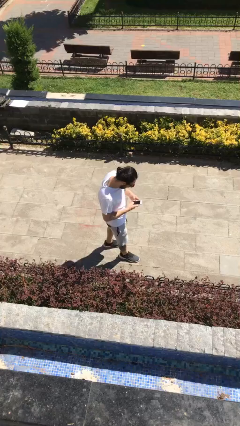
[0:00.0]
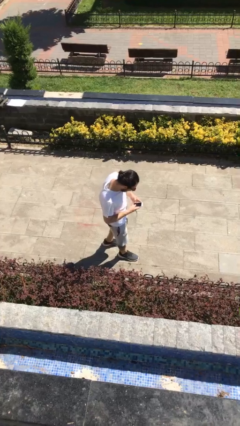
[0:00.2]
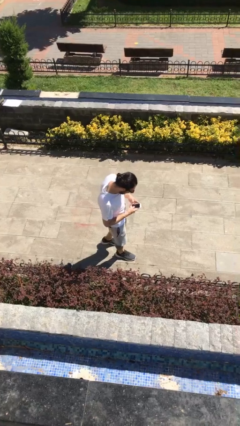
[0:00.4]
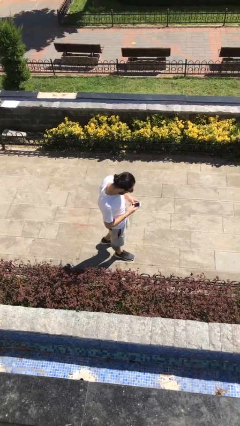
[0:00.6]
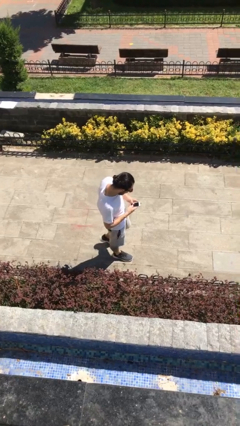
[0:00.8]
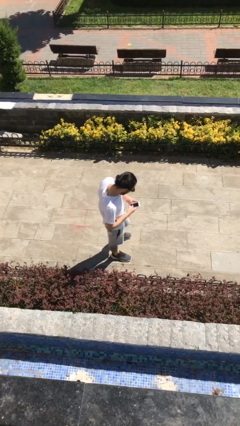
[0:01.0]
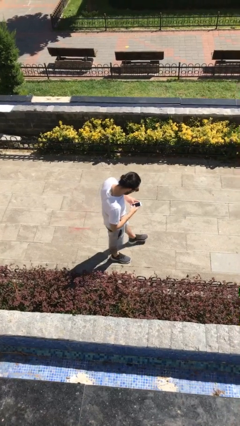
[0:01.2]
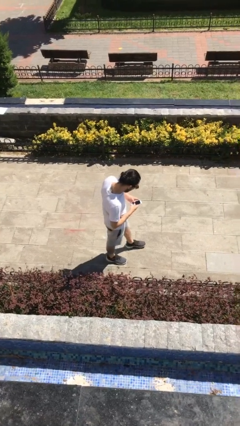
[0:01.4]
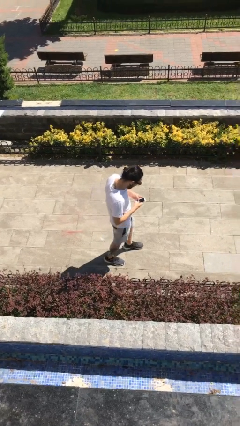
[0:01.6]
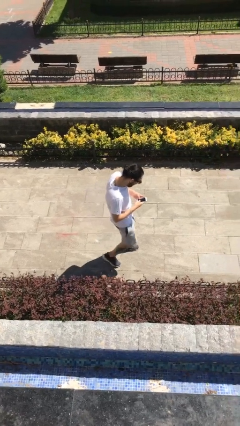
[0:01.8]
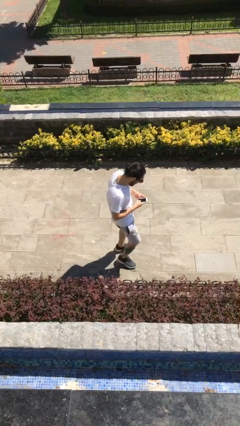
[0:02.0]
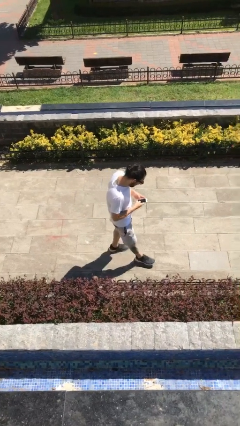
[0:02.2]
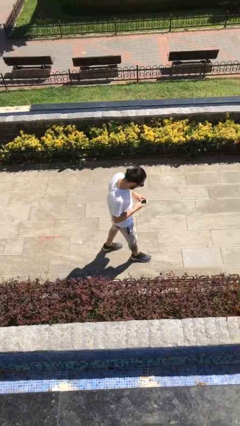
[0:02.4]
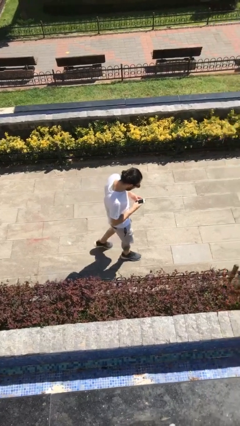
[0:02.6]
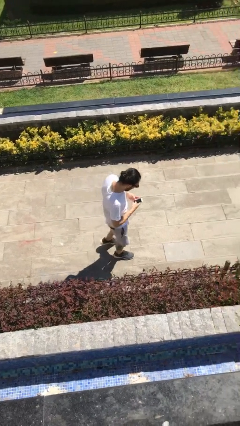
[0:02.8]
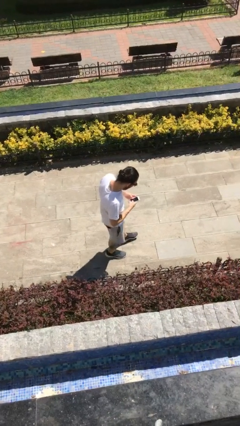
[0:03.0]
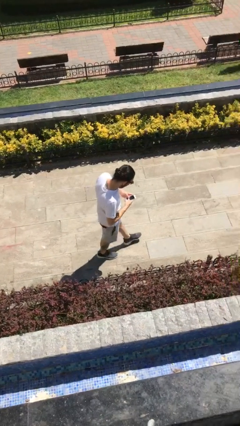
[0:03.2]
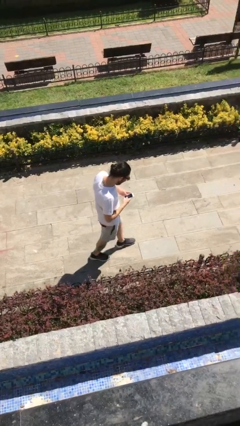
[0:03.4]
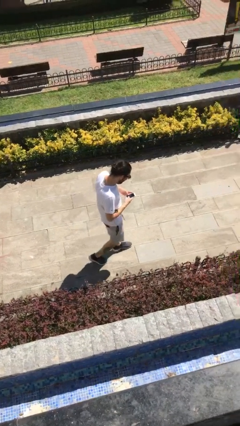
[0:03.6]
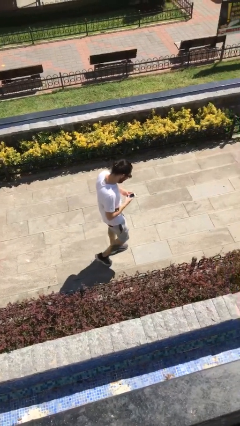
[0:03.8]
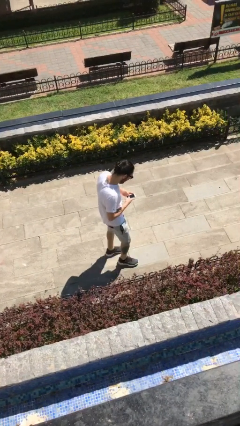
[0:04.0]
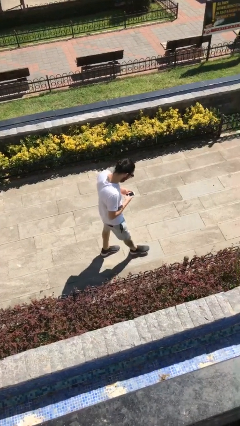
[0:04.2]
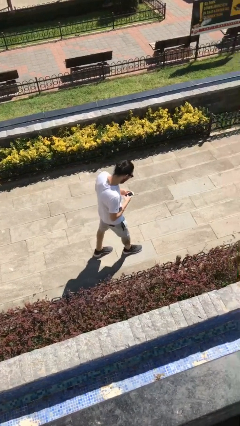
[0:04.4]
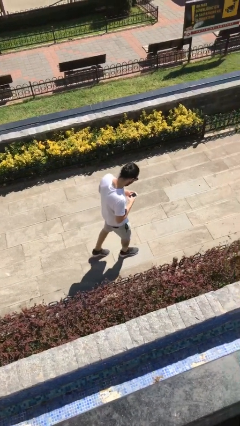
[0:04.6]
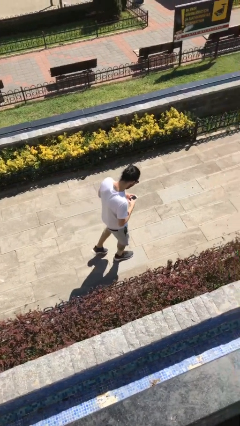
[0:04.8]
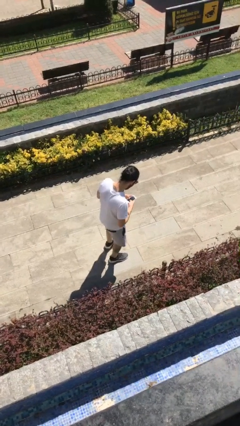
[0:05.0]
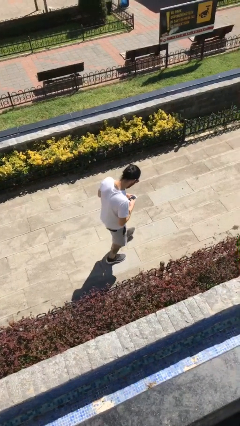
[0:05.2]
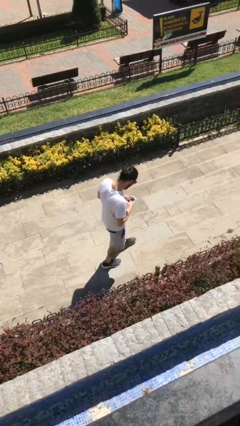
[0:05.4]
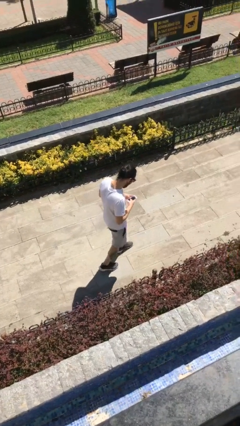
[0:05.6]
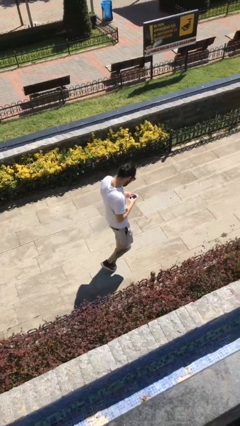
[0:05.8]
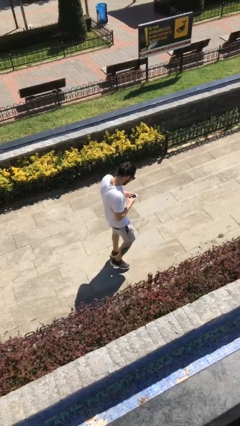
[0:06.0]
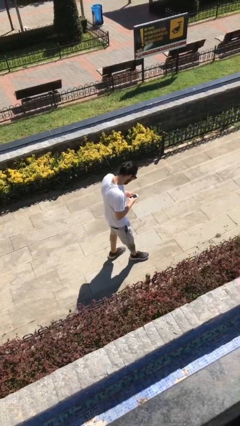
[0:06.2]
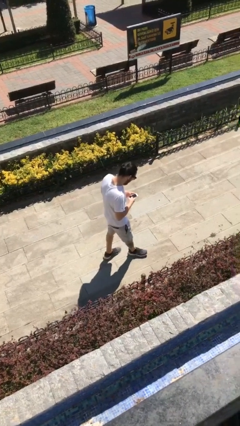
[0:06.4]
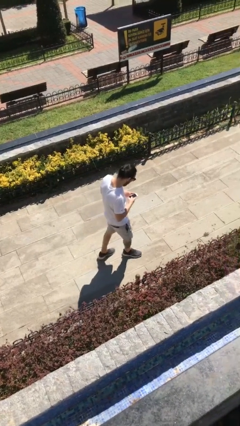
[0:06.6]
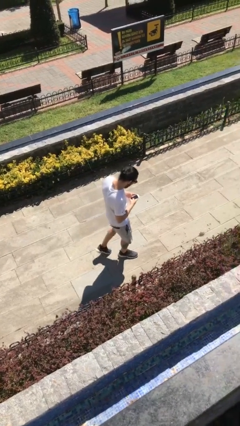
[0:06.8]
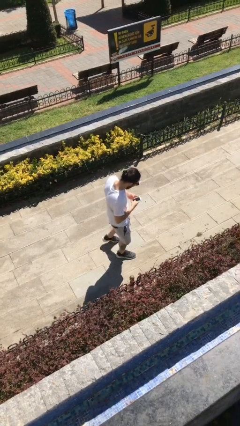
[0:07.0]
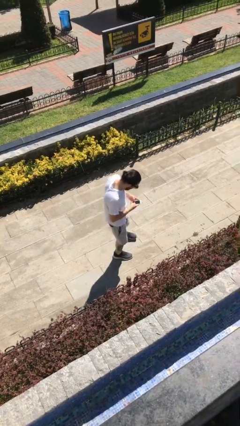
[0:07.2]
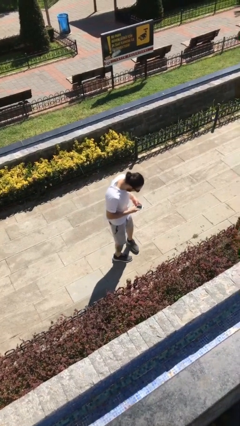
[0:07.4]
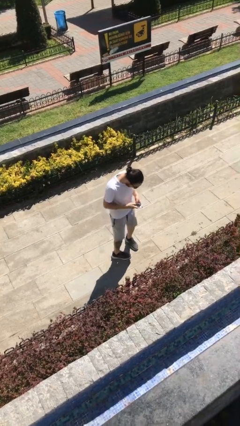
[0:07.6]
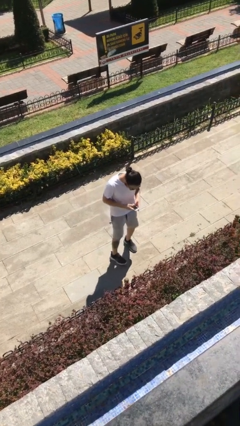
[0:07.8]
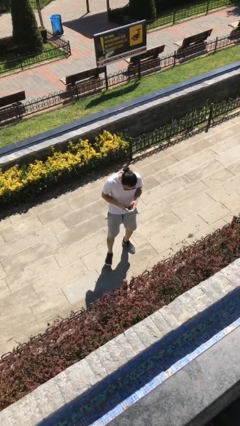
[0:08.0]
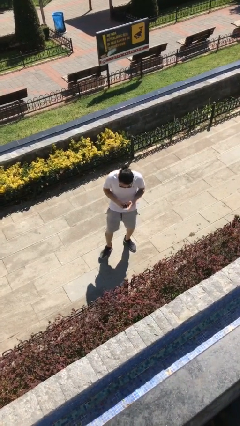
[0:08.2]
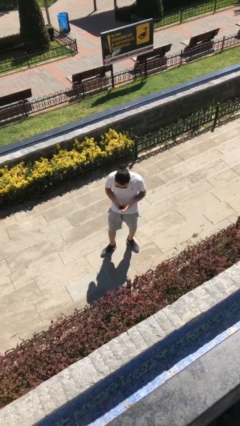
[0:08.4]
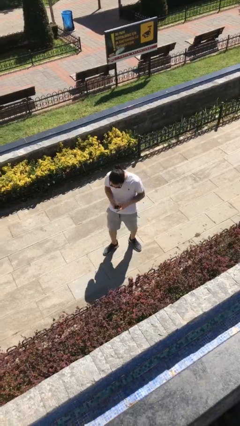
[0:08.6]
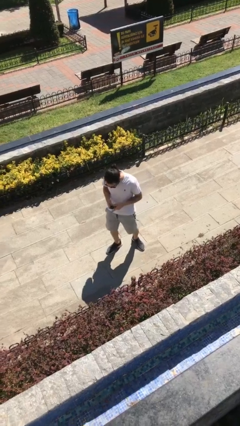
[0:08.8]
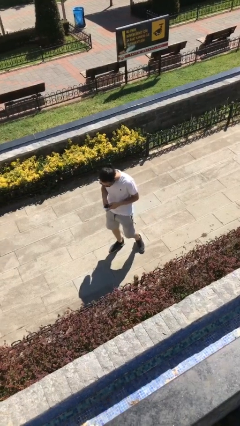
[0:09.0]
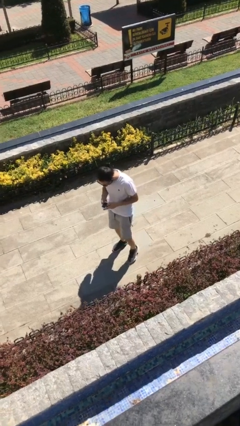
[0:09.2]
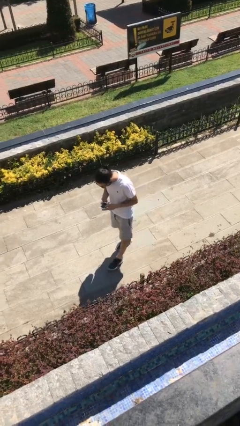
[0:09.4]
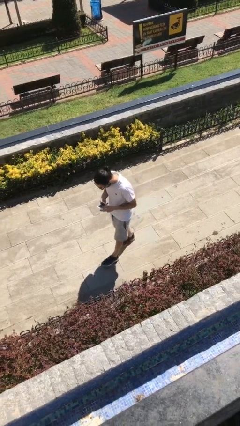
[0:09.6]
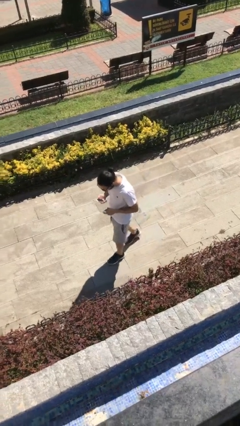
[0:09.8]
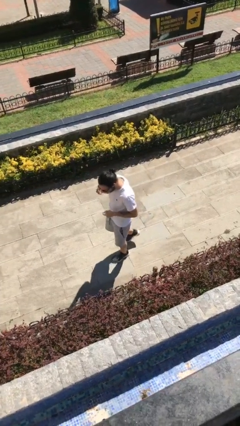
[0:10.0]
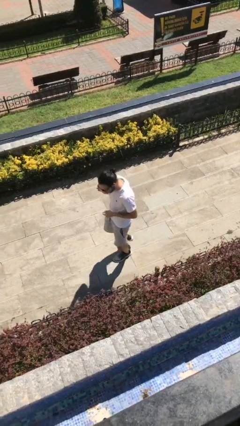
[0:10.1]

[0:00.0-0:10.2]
person texts on phone

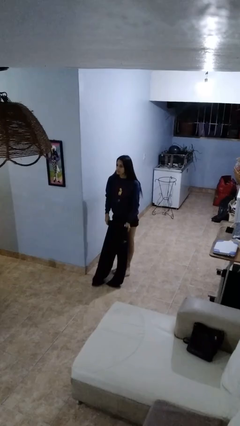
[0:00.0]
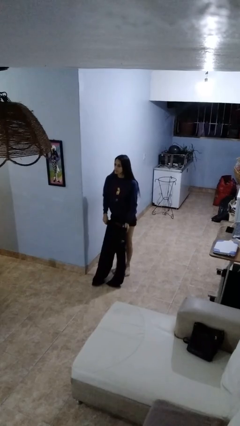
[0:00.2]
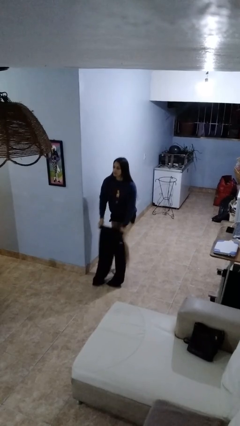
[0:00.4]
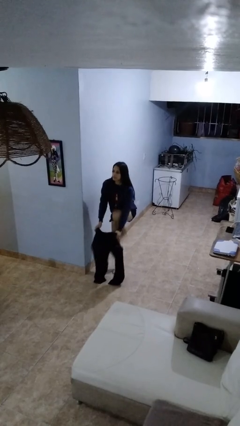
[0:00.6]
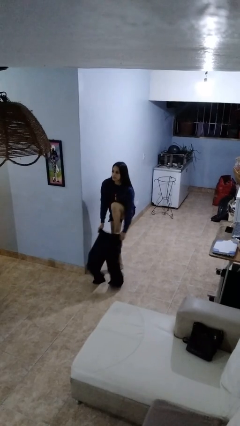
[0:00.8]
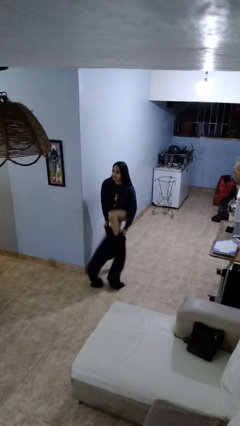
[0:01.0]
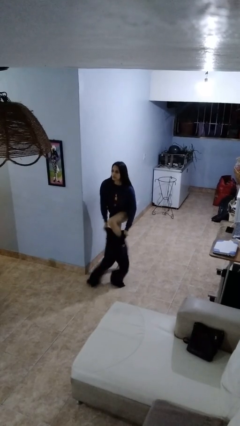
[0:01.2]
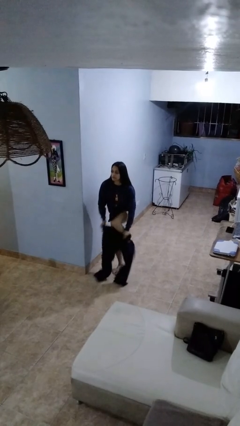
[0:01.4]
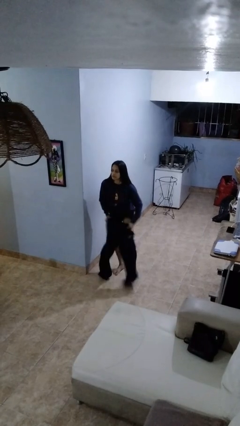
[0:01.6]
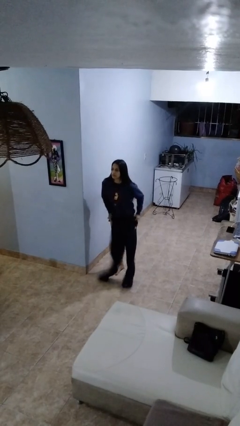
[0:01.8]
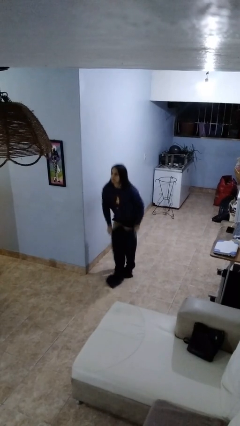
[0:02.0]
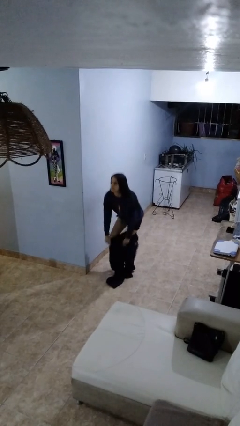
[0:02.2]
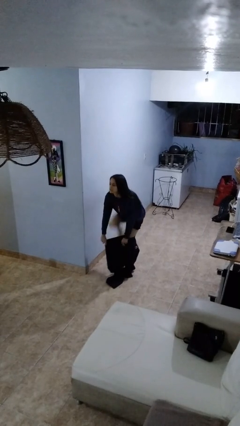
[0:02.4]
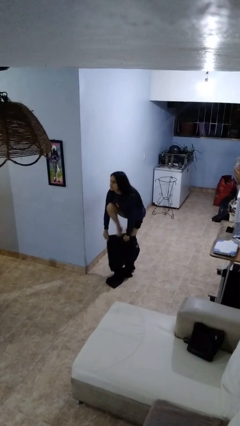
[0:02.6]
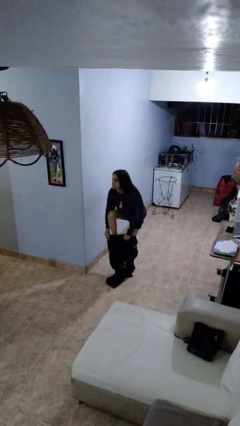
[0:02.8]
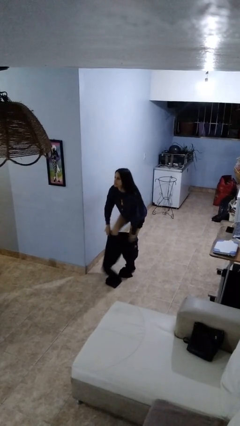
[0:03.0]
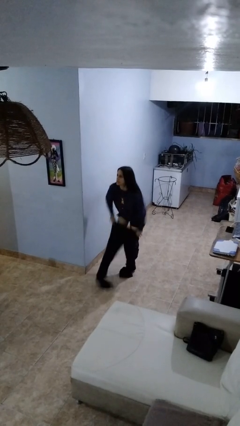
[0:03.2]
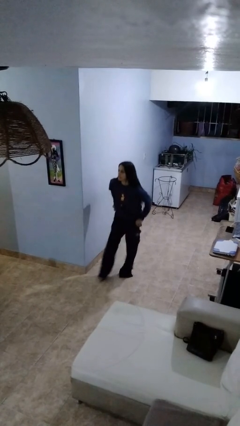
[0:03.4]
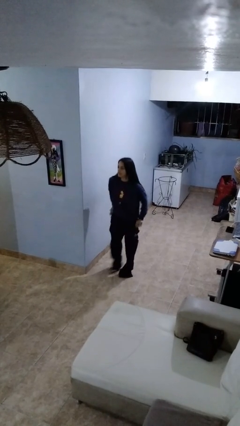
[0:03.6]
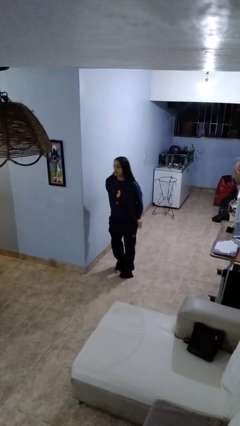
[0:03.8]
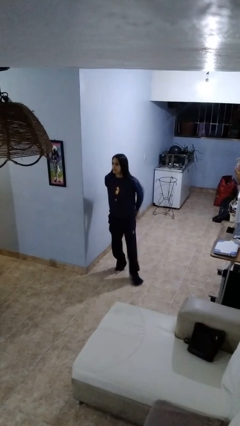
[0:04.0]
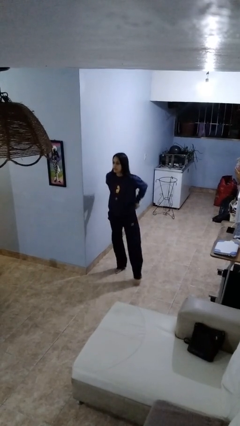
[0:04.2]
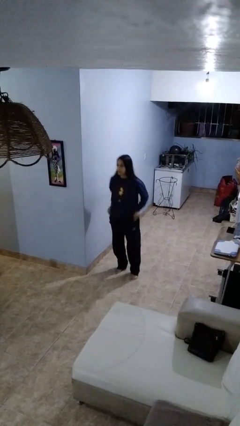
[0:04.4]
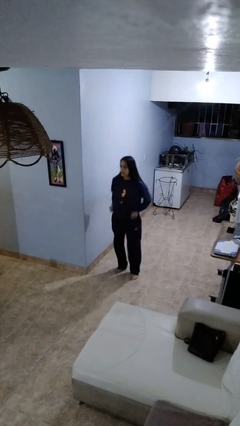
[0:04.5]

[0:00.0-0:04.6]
person puts on pants

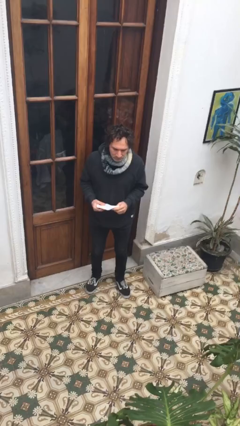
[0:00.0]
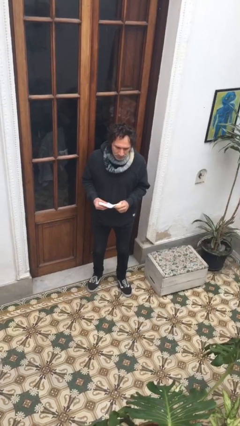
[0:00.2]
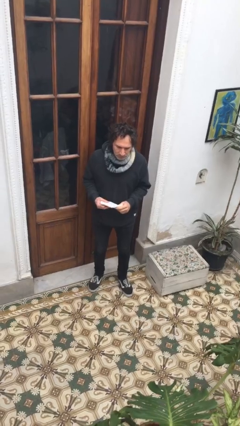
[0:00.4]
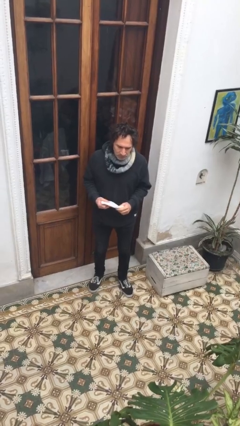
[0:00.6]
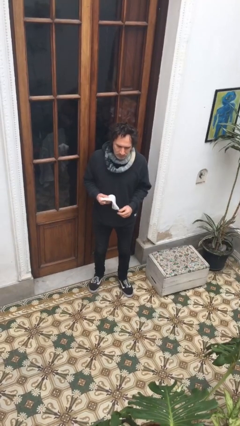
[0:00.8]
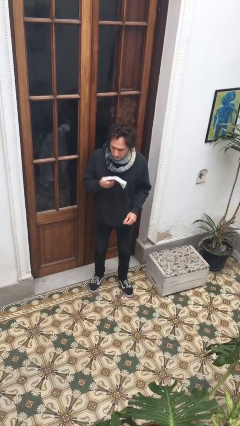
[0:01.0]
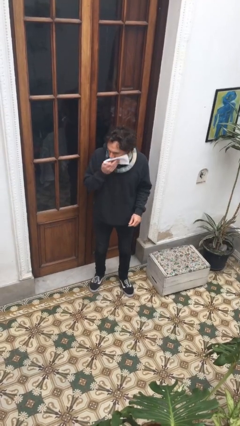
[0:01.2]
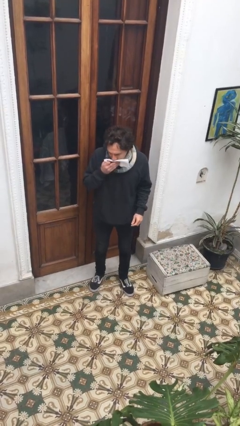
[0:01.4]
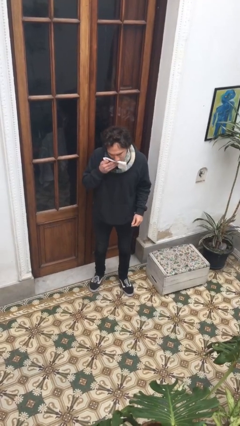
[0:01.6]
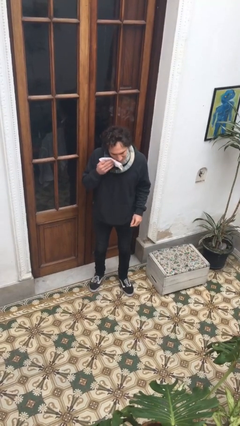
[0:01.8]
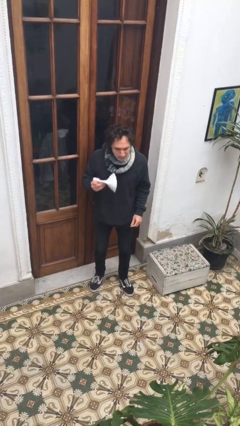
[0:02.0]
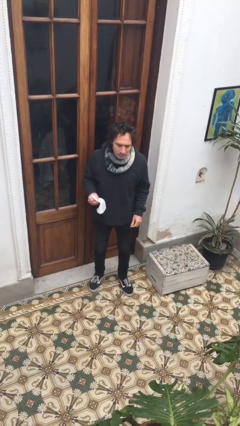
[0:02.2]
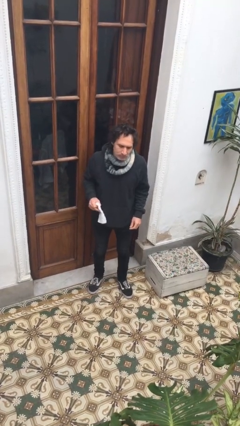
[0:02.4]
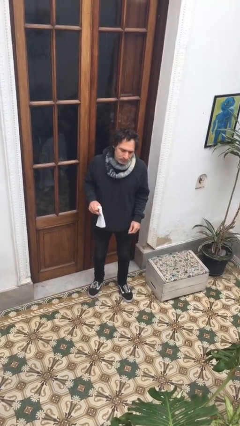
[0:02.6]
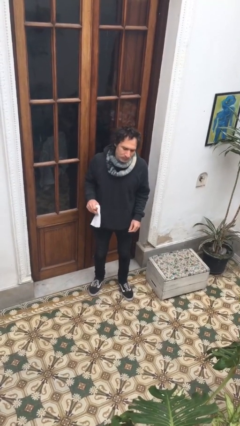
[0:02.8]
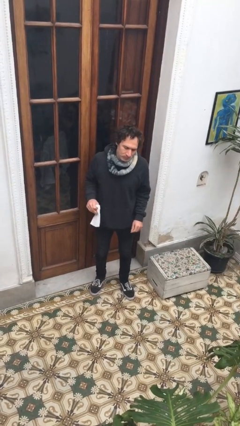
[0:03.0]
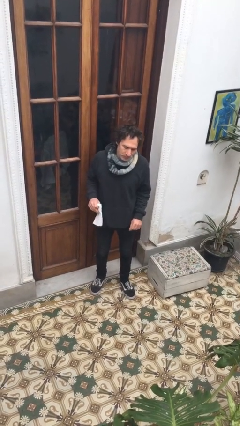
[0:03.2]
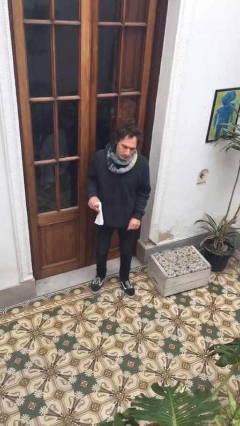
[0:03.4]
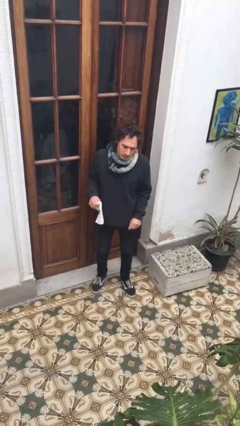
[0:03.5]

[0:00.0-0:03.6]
person wipes mouth with napkin
